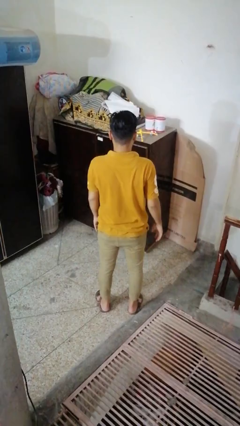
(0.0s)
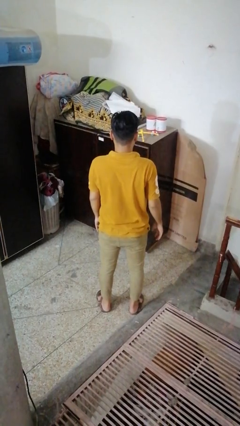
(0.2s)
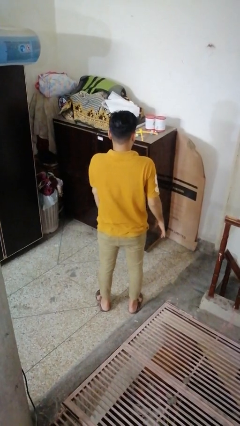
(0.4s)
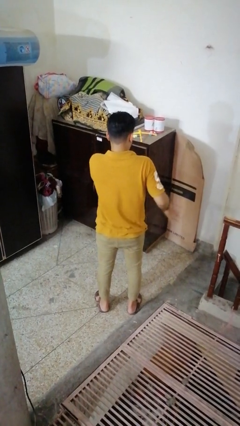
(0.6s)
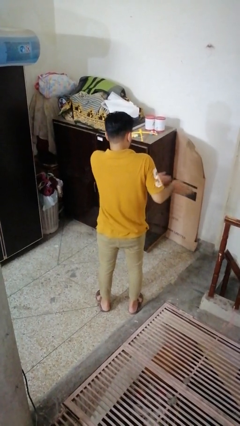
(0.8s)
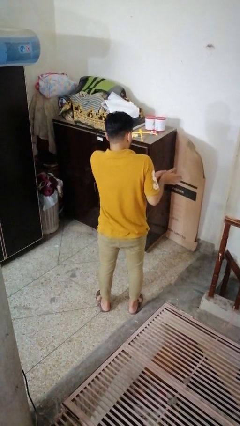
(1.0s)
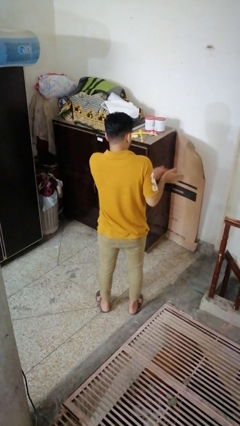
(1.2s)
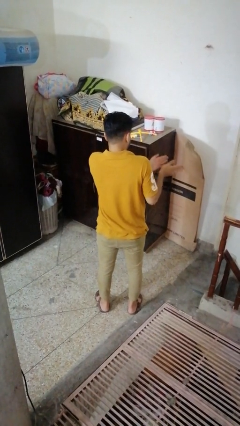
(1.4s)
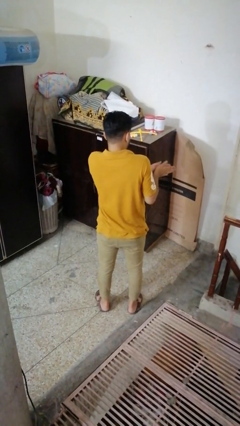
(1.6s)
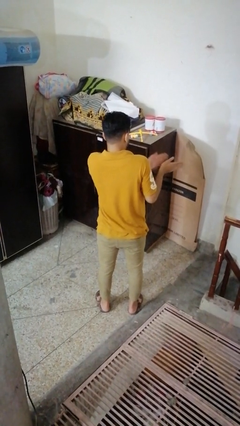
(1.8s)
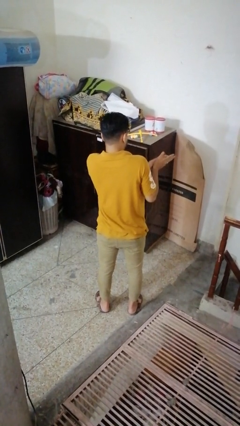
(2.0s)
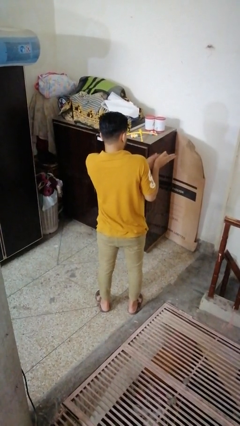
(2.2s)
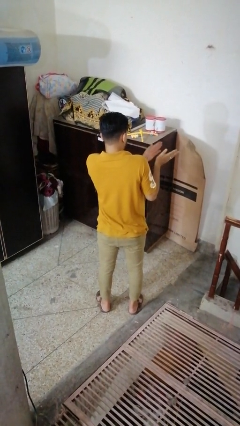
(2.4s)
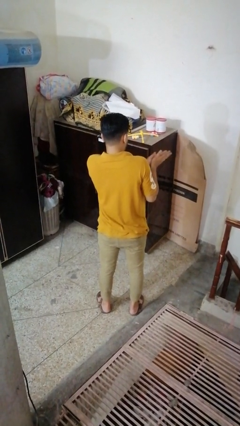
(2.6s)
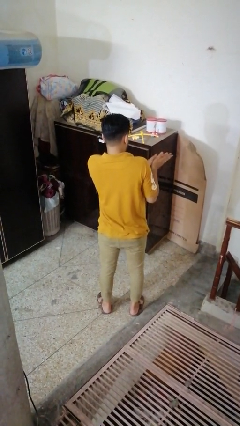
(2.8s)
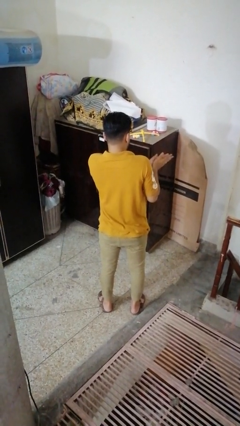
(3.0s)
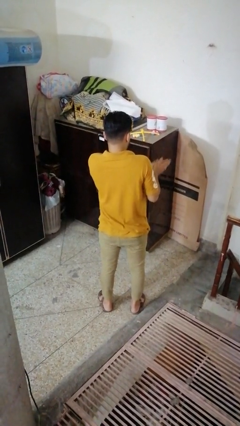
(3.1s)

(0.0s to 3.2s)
person claps hands

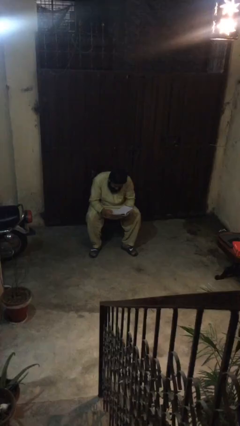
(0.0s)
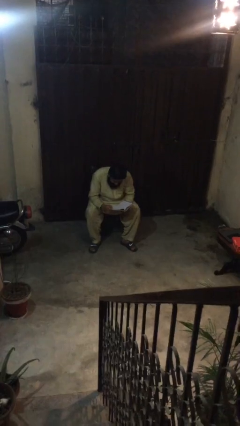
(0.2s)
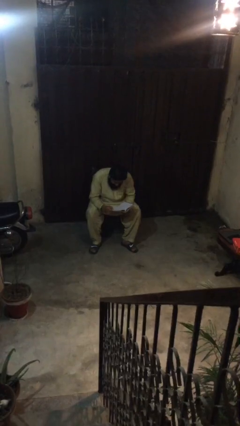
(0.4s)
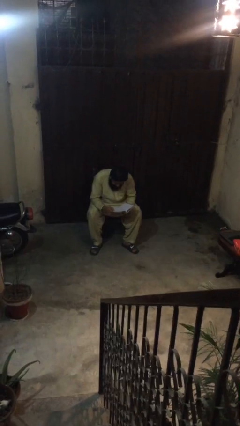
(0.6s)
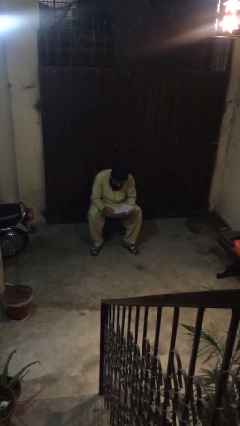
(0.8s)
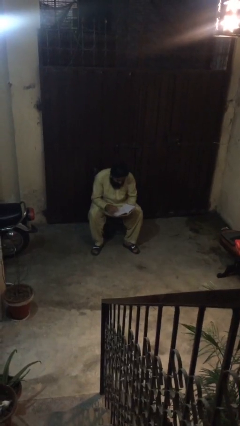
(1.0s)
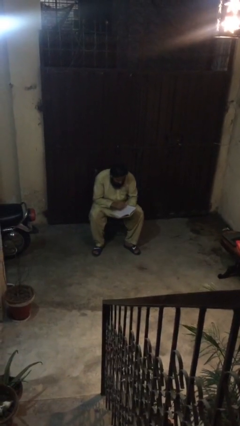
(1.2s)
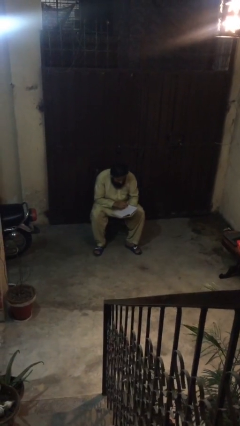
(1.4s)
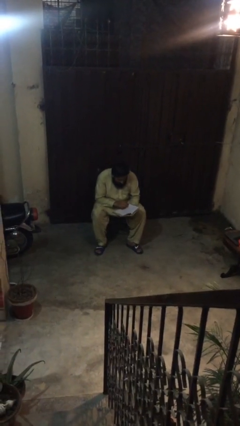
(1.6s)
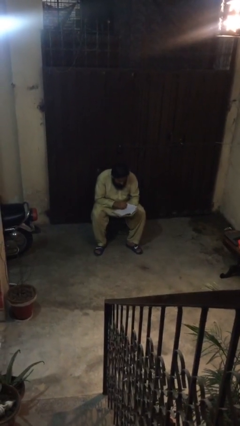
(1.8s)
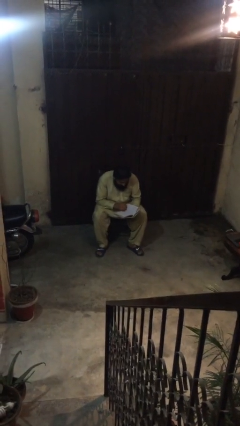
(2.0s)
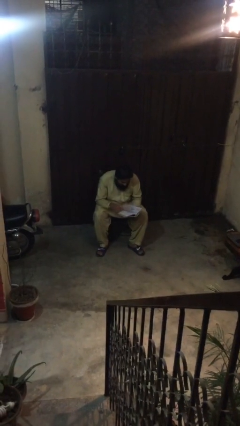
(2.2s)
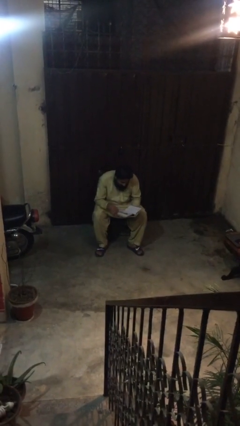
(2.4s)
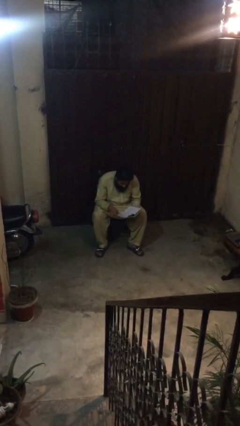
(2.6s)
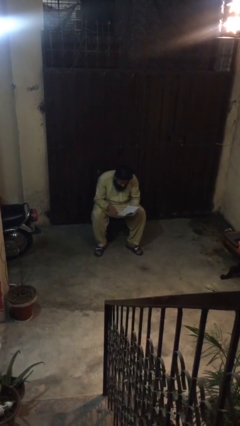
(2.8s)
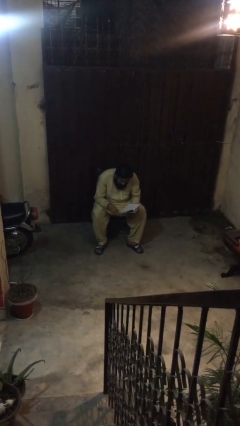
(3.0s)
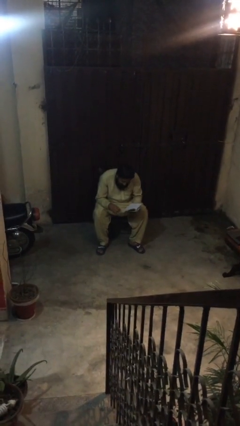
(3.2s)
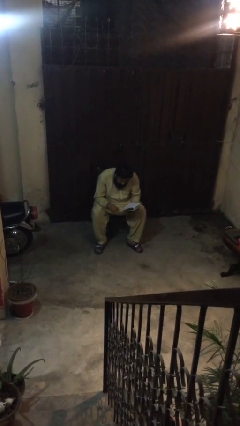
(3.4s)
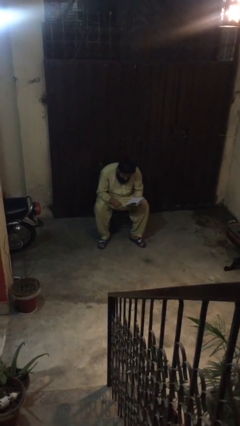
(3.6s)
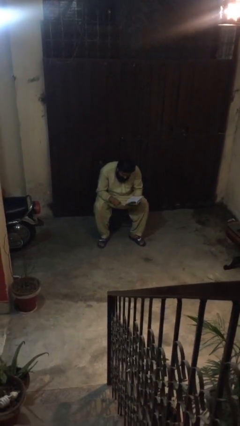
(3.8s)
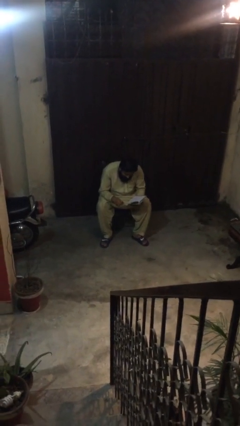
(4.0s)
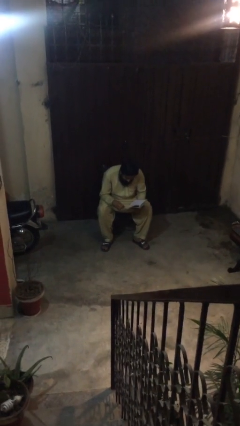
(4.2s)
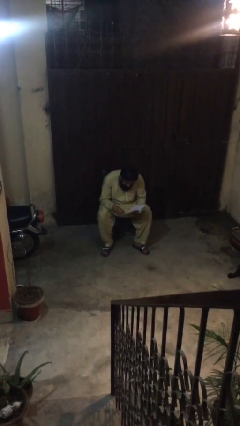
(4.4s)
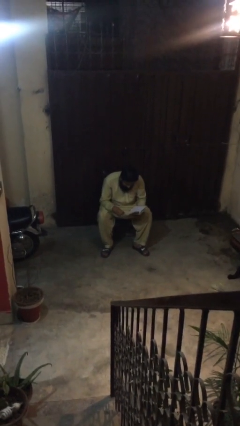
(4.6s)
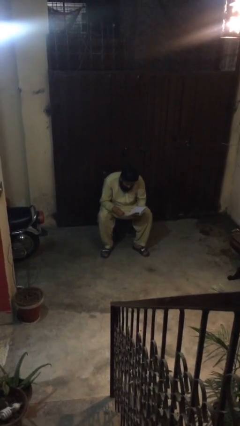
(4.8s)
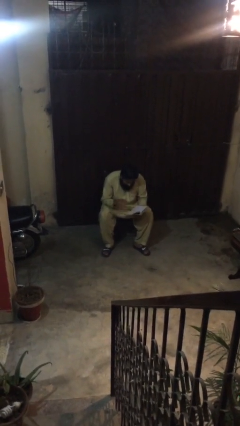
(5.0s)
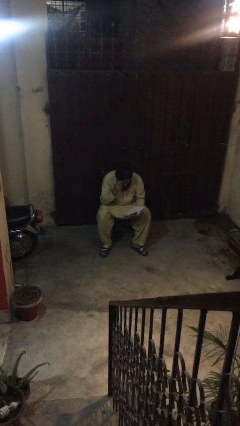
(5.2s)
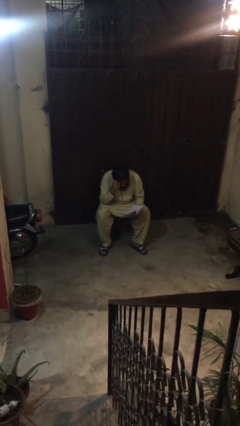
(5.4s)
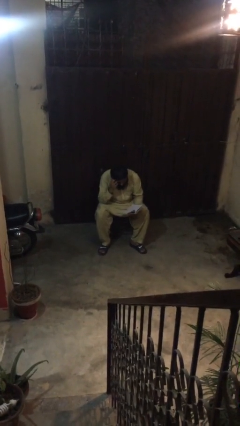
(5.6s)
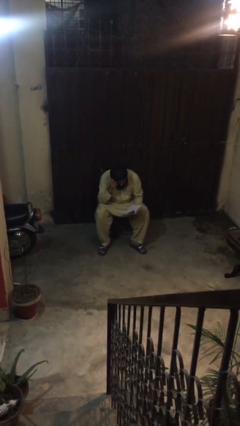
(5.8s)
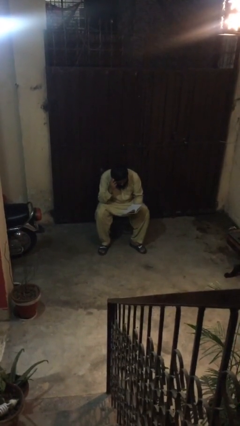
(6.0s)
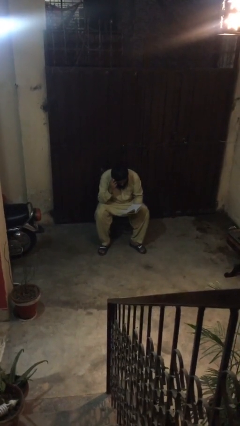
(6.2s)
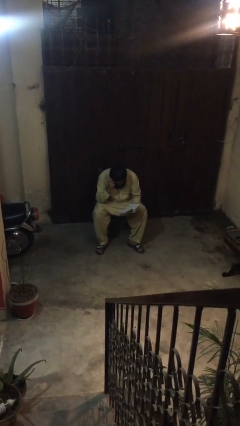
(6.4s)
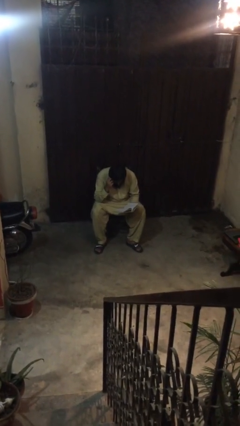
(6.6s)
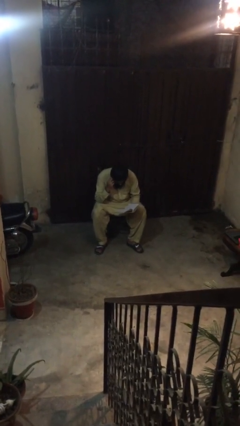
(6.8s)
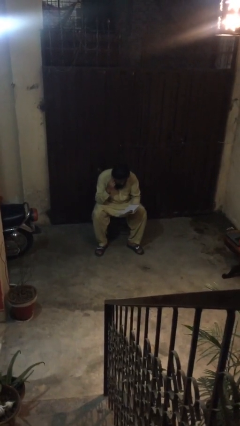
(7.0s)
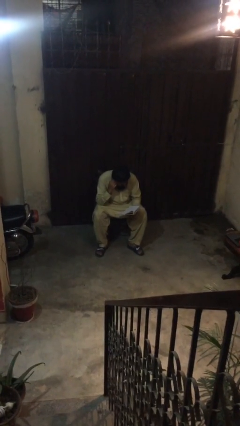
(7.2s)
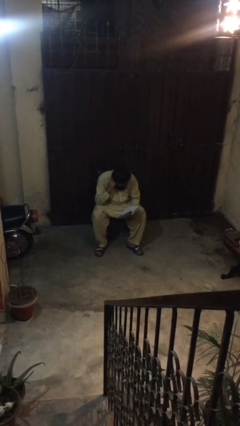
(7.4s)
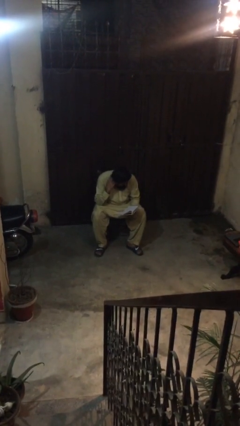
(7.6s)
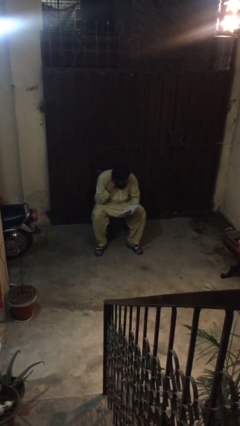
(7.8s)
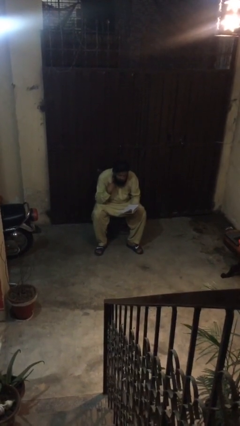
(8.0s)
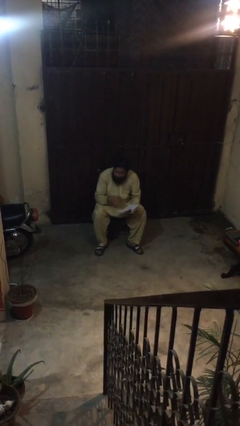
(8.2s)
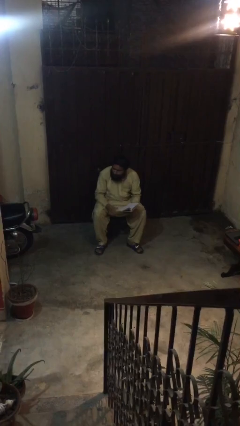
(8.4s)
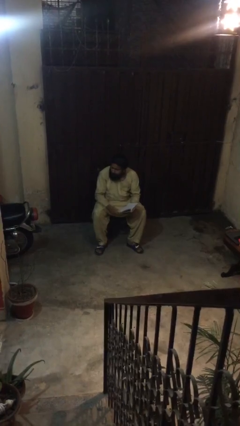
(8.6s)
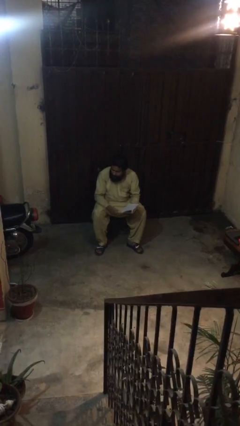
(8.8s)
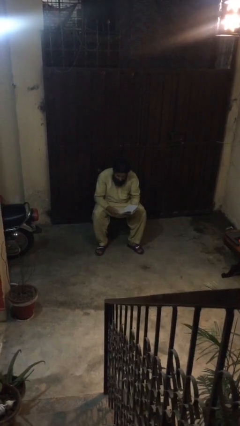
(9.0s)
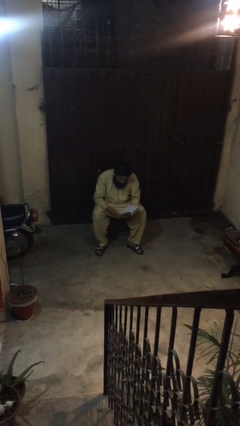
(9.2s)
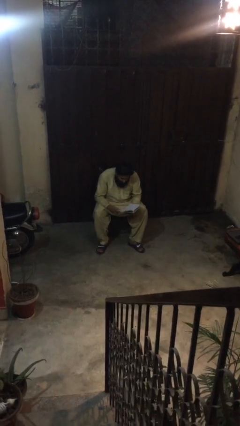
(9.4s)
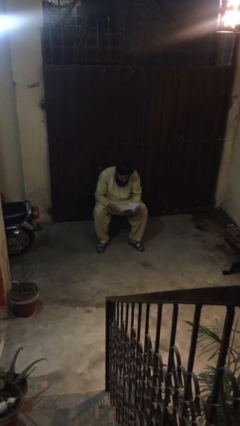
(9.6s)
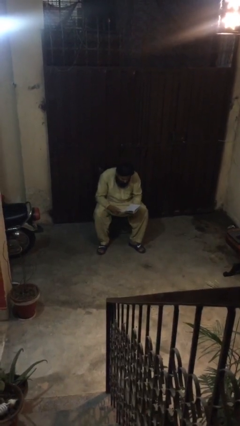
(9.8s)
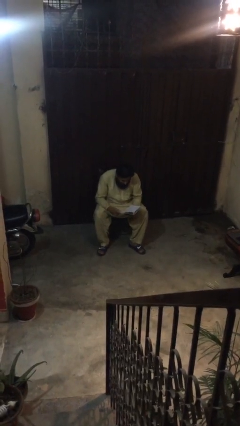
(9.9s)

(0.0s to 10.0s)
person reads document

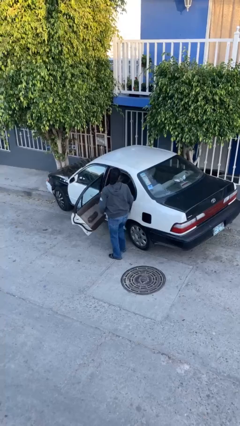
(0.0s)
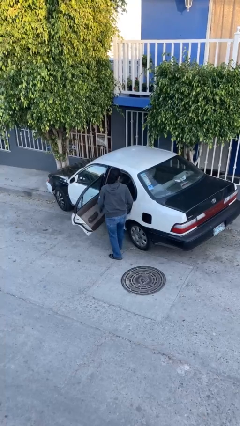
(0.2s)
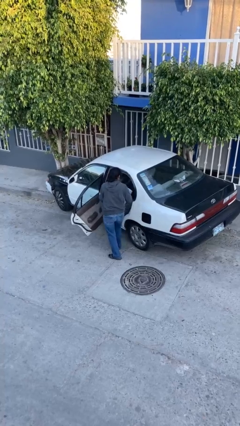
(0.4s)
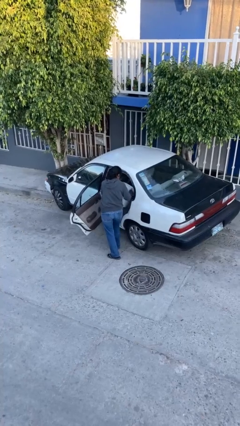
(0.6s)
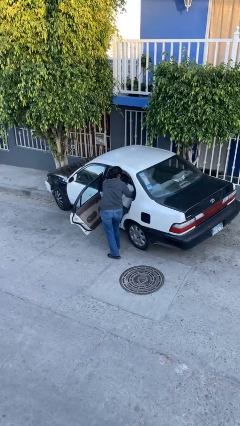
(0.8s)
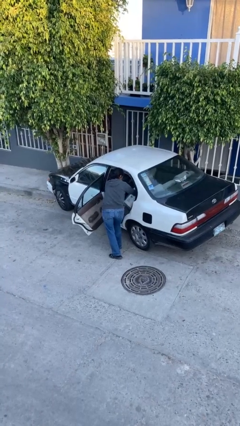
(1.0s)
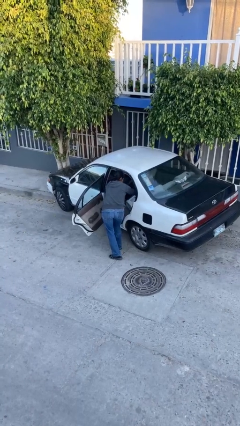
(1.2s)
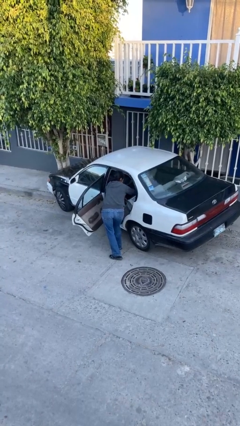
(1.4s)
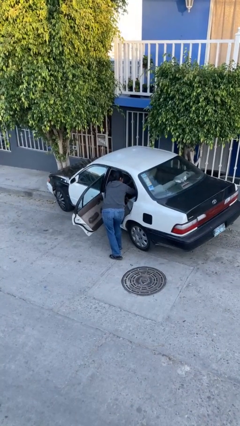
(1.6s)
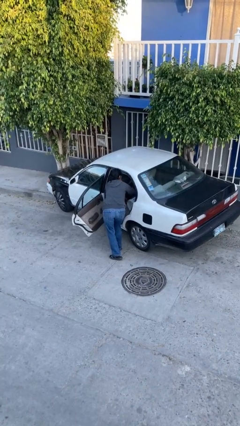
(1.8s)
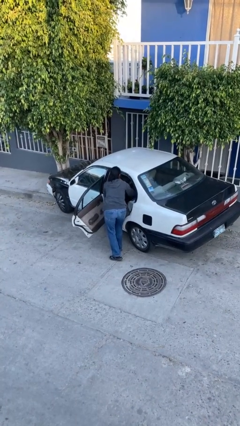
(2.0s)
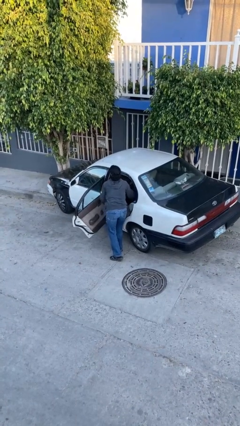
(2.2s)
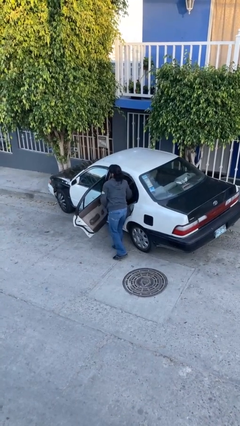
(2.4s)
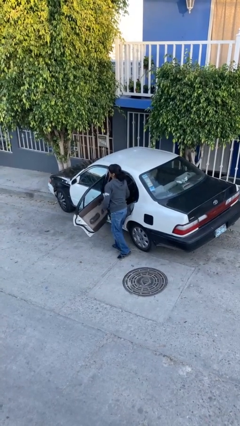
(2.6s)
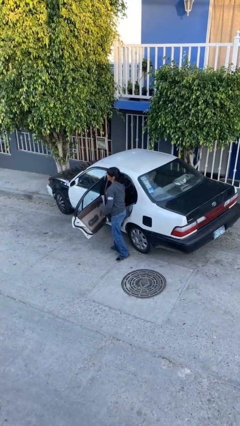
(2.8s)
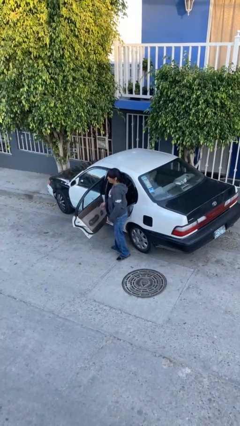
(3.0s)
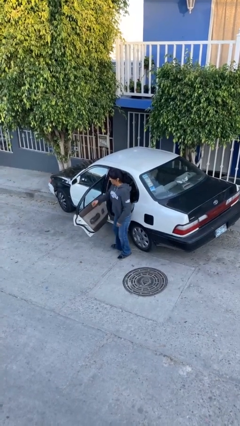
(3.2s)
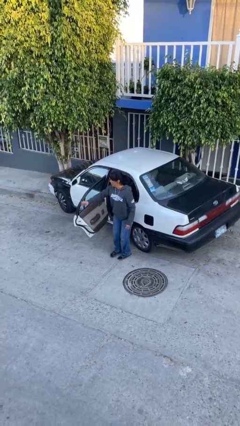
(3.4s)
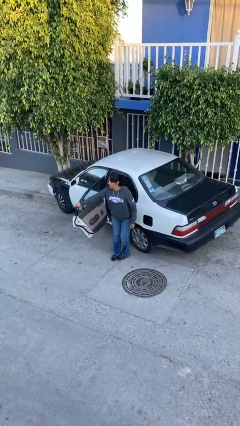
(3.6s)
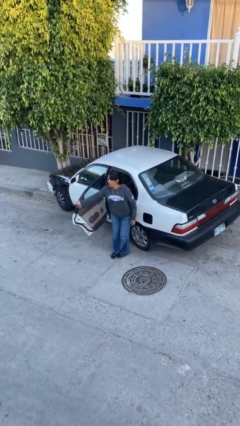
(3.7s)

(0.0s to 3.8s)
person loads car

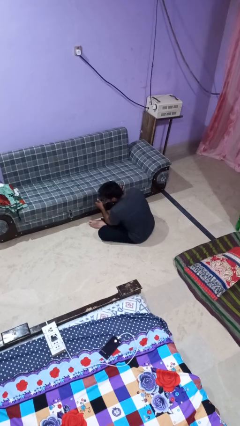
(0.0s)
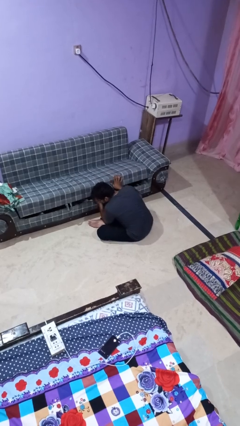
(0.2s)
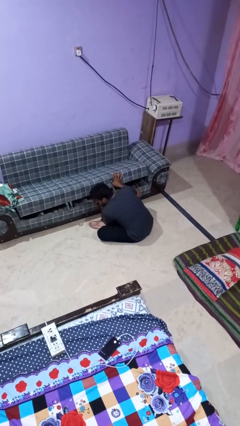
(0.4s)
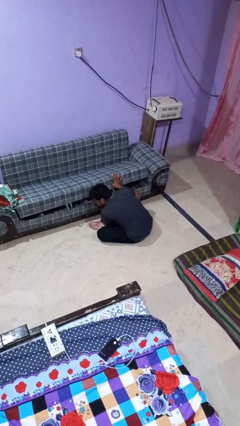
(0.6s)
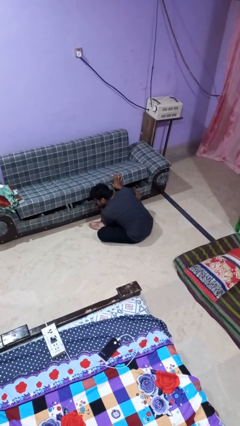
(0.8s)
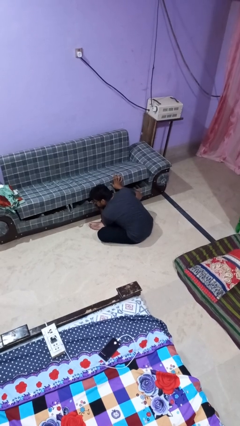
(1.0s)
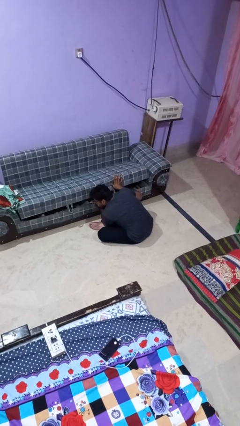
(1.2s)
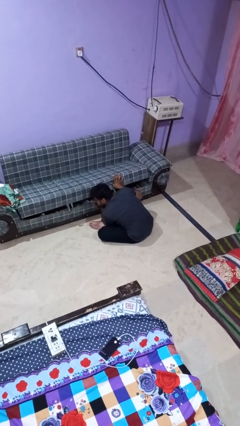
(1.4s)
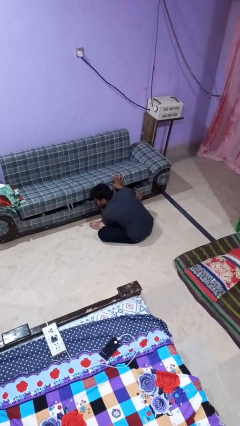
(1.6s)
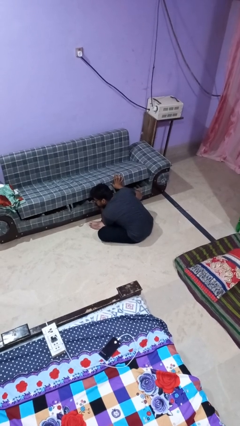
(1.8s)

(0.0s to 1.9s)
person searches under couch
